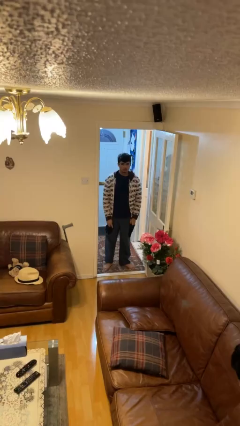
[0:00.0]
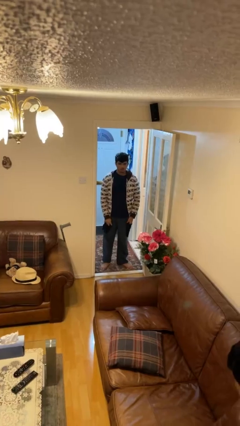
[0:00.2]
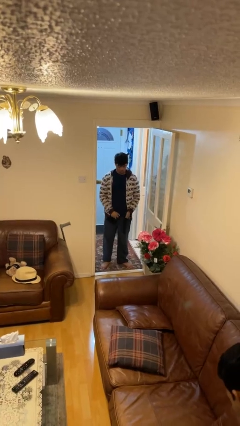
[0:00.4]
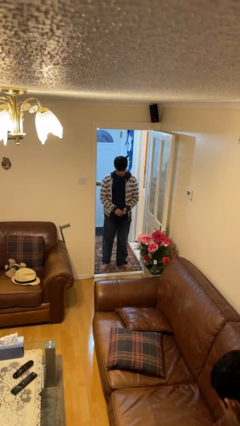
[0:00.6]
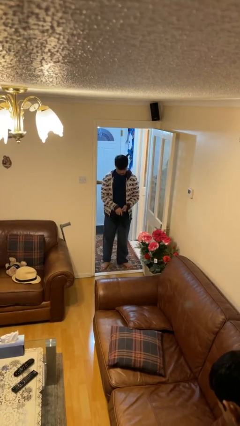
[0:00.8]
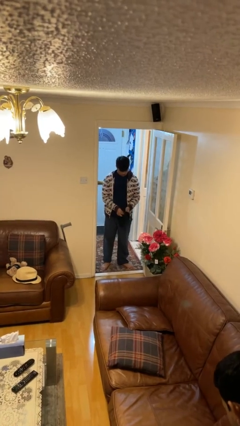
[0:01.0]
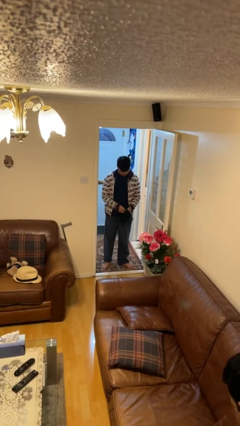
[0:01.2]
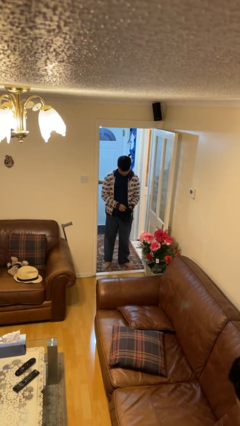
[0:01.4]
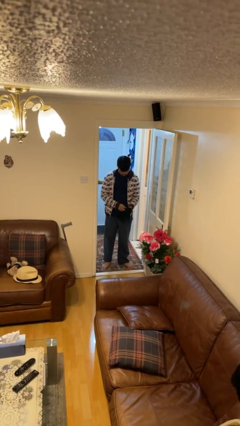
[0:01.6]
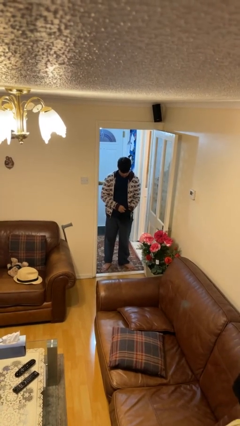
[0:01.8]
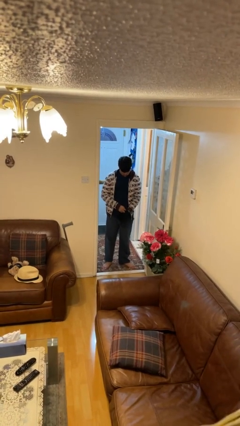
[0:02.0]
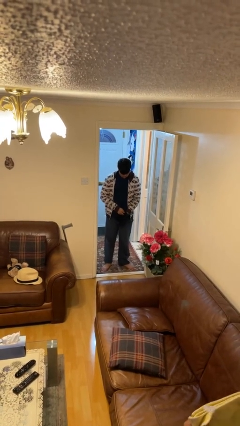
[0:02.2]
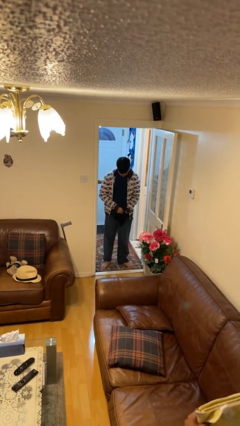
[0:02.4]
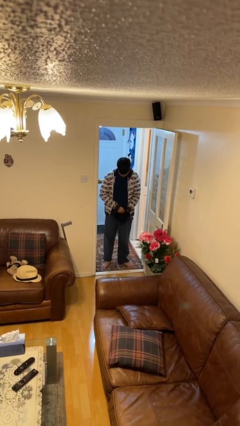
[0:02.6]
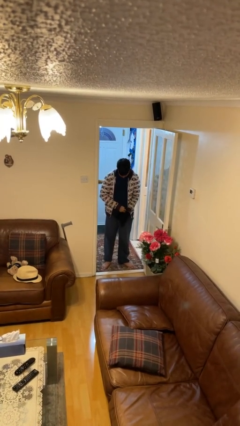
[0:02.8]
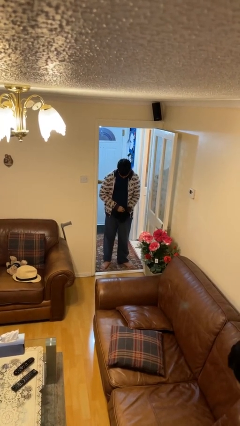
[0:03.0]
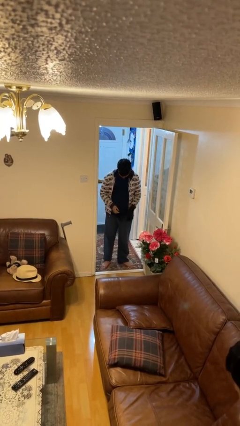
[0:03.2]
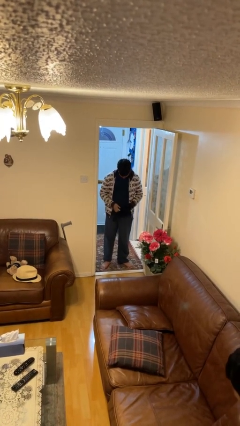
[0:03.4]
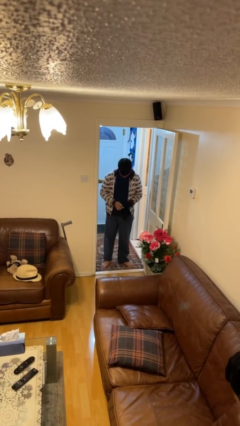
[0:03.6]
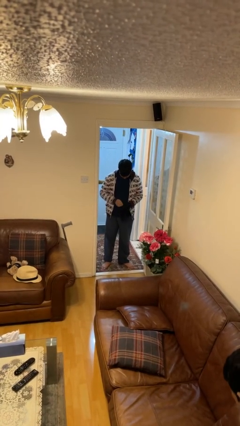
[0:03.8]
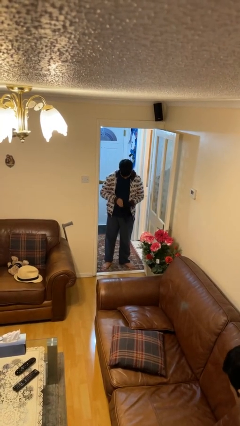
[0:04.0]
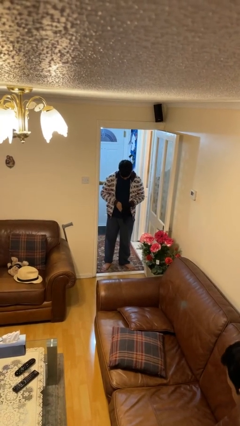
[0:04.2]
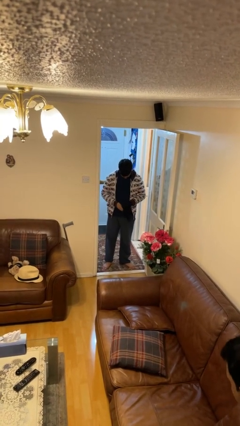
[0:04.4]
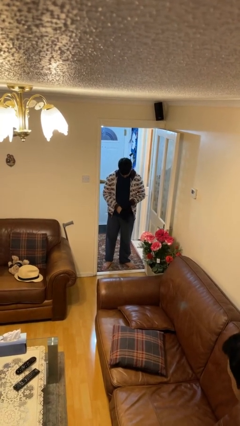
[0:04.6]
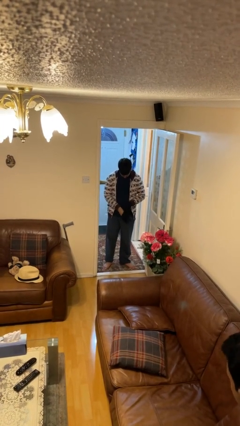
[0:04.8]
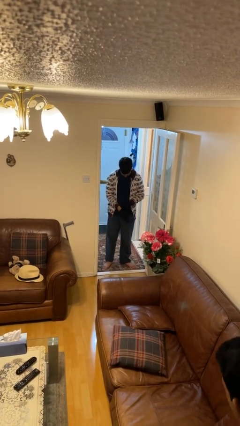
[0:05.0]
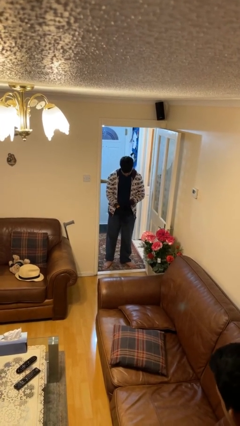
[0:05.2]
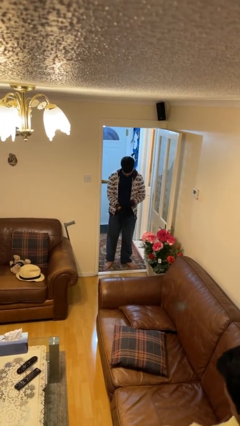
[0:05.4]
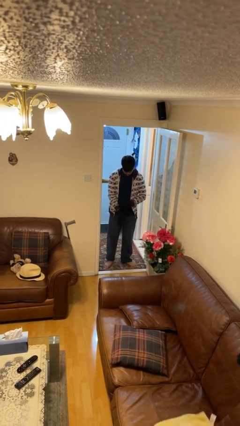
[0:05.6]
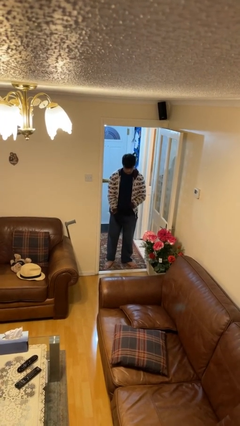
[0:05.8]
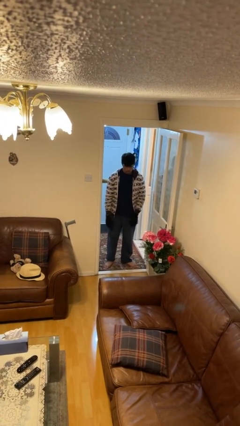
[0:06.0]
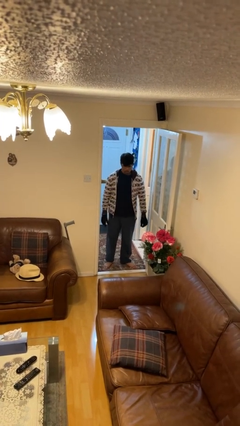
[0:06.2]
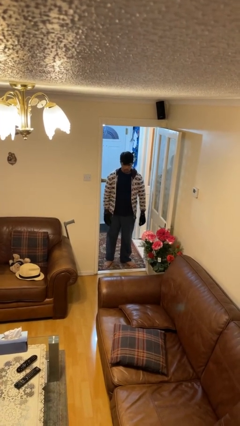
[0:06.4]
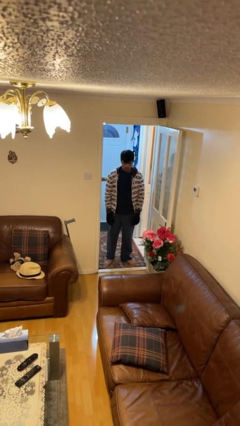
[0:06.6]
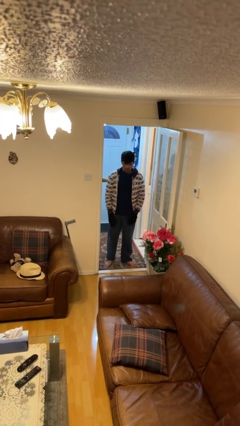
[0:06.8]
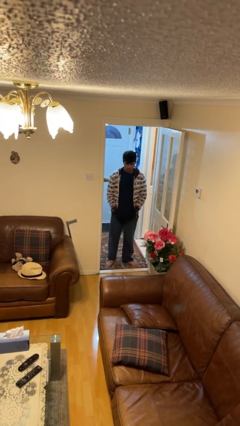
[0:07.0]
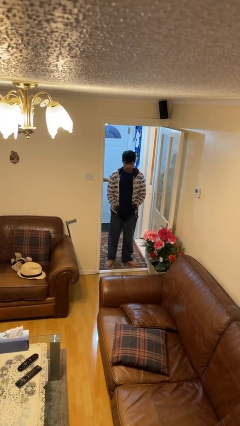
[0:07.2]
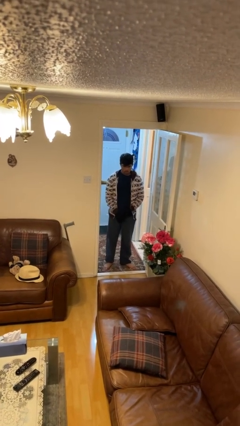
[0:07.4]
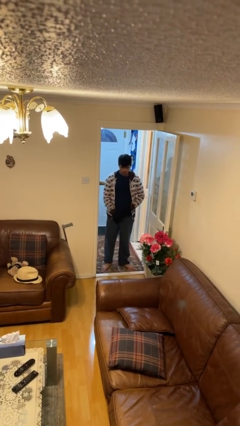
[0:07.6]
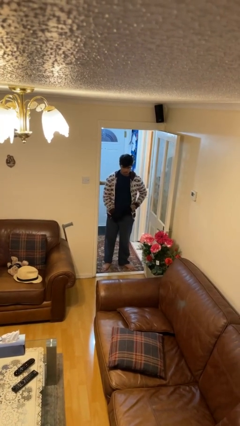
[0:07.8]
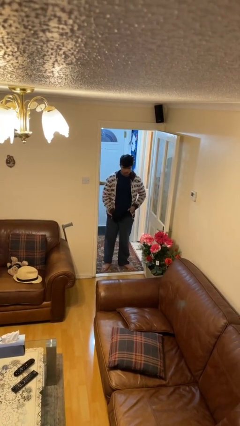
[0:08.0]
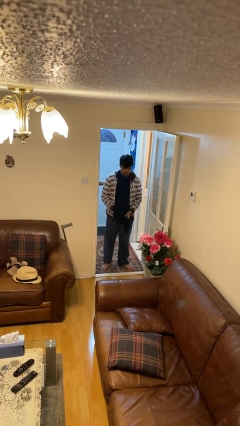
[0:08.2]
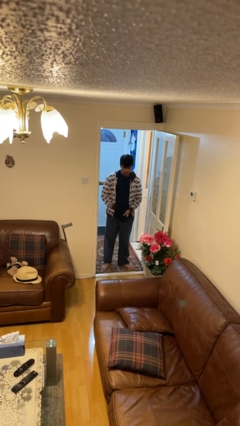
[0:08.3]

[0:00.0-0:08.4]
person puts on gloves

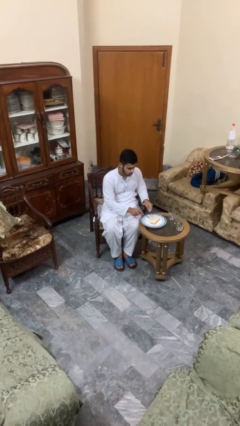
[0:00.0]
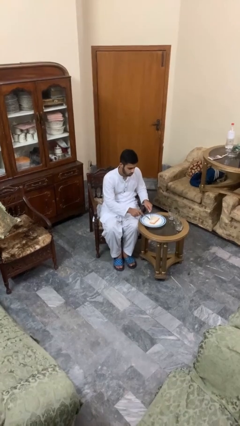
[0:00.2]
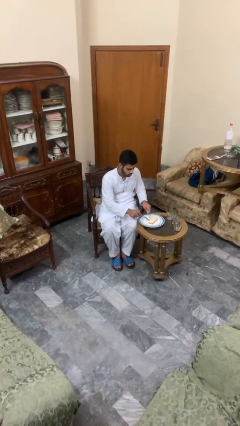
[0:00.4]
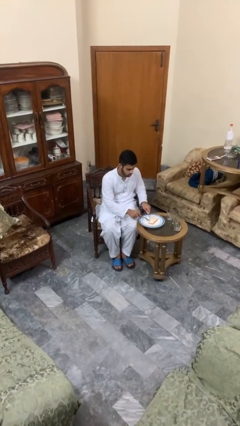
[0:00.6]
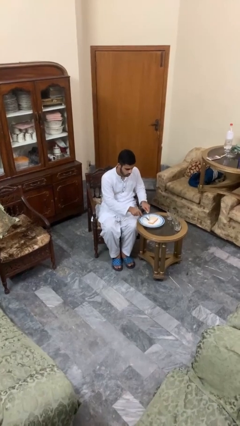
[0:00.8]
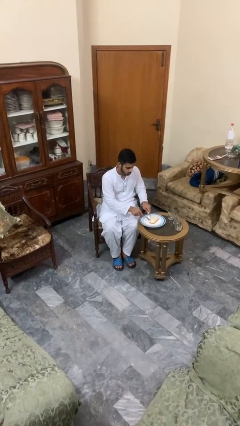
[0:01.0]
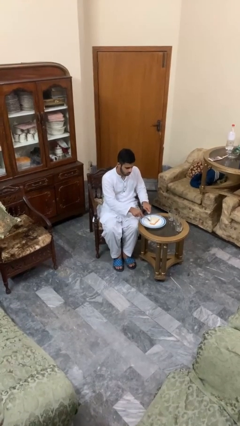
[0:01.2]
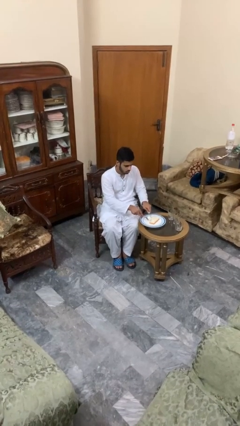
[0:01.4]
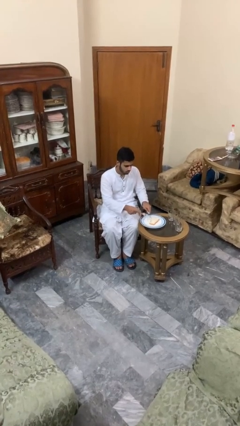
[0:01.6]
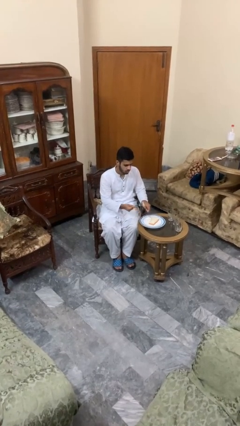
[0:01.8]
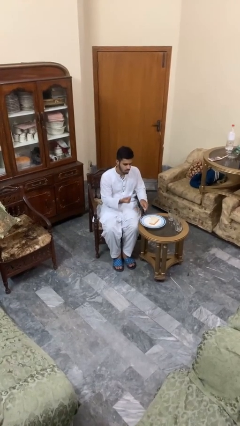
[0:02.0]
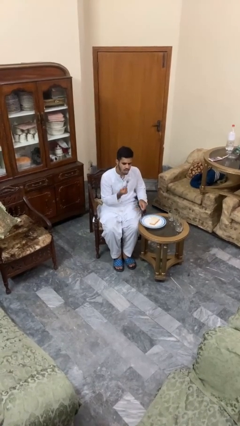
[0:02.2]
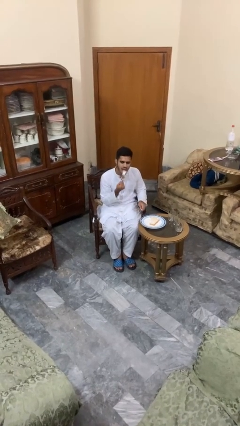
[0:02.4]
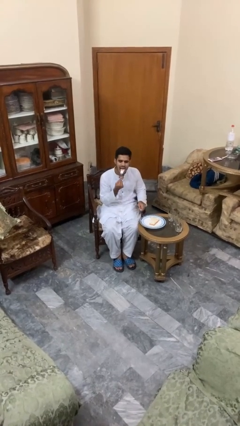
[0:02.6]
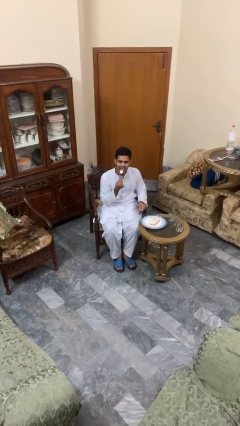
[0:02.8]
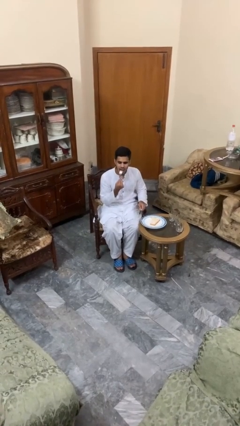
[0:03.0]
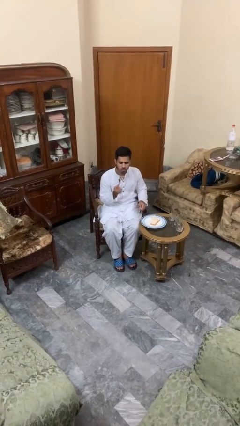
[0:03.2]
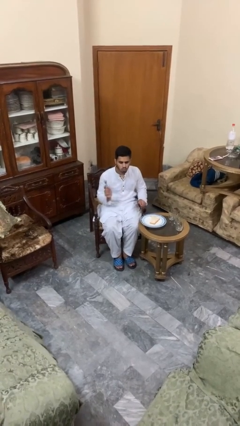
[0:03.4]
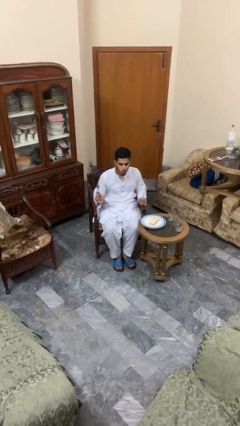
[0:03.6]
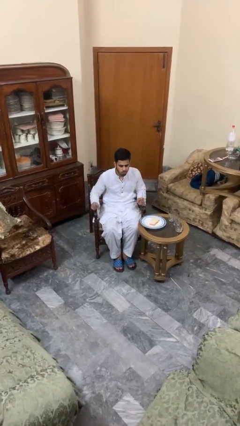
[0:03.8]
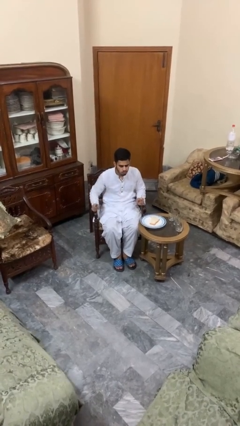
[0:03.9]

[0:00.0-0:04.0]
person eats with utensil

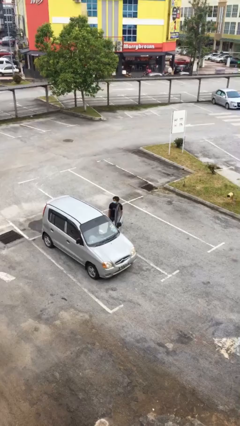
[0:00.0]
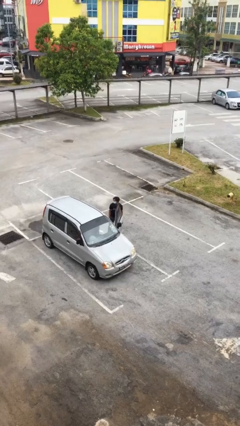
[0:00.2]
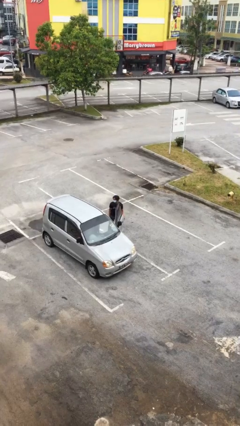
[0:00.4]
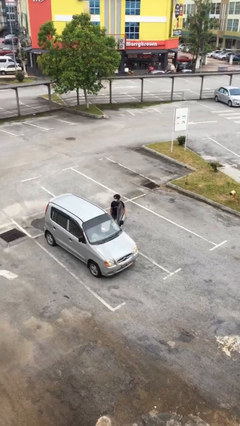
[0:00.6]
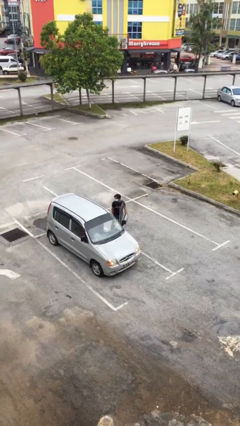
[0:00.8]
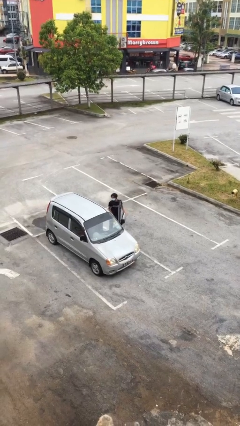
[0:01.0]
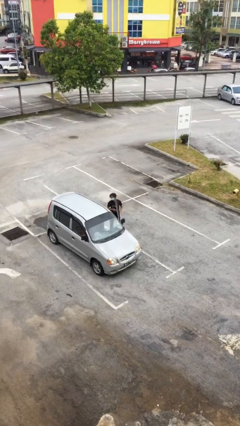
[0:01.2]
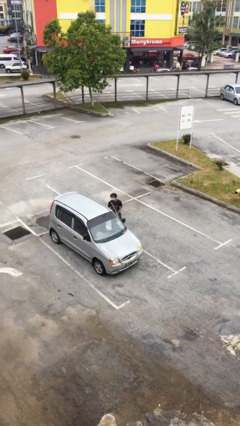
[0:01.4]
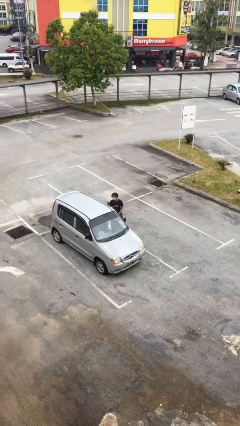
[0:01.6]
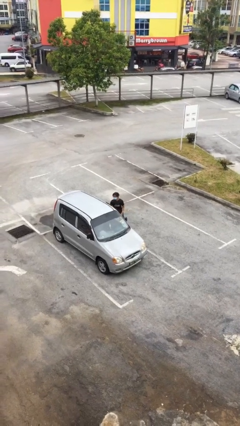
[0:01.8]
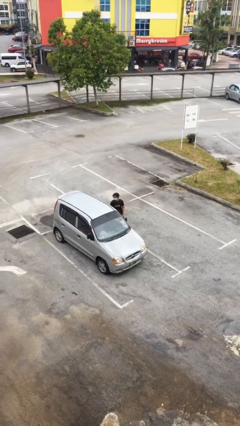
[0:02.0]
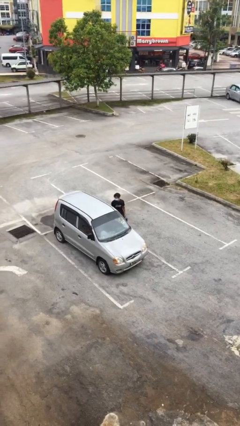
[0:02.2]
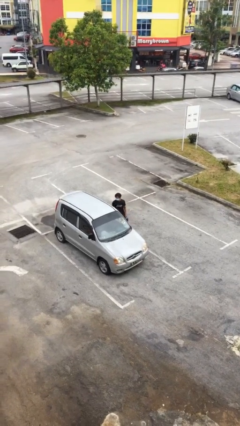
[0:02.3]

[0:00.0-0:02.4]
person closes car door

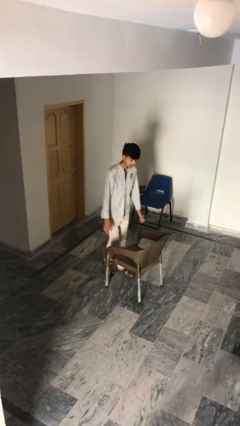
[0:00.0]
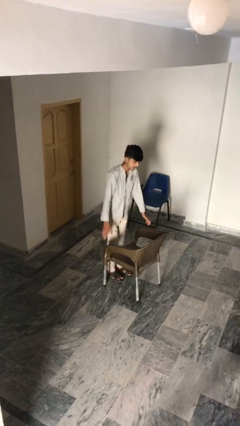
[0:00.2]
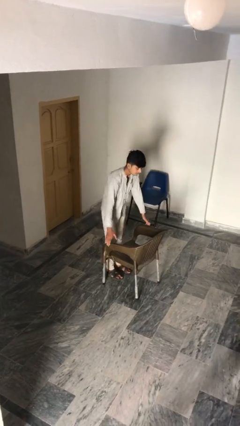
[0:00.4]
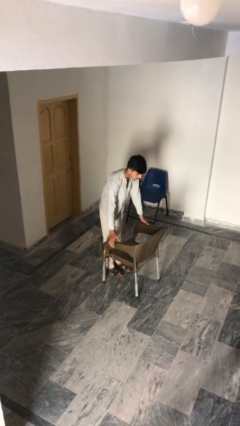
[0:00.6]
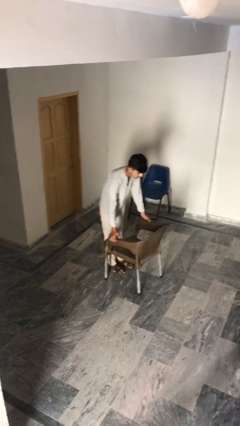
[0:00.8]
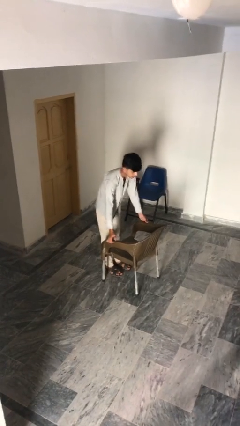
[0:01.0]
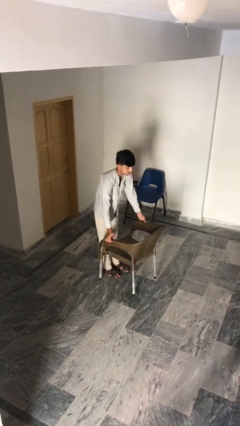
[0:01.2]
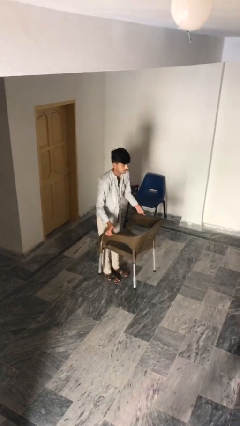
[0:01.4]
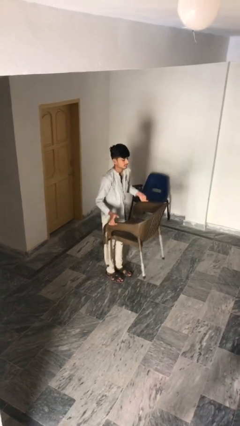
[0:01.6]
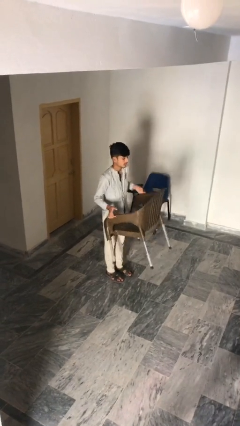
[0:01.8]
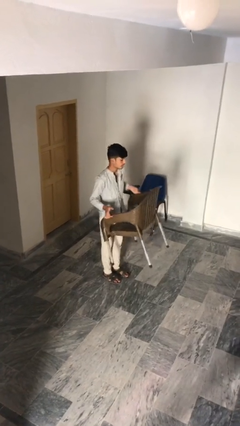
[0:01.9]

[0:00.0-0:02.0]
person picks up object from floor

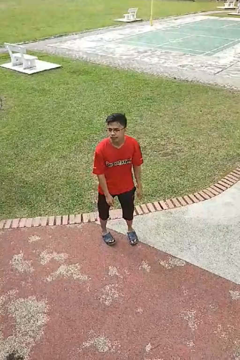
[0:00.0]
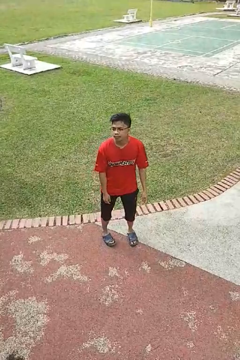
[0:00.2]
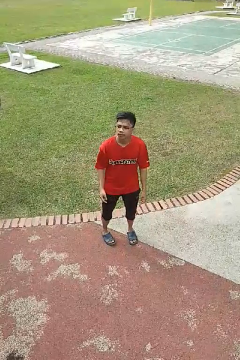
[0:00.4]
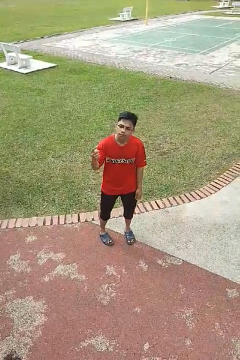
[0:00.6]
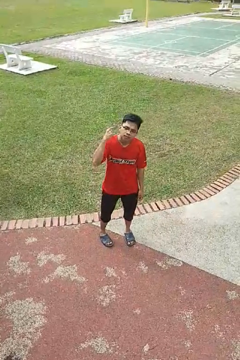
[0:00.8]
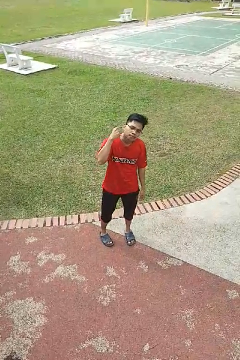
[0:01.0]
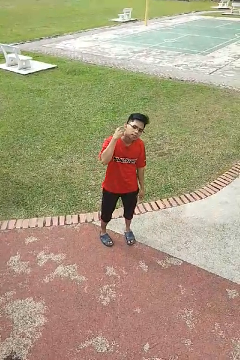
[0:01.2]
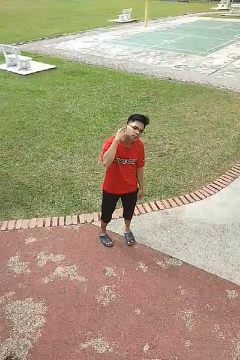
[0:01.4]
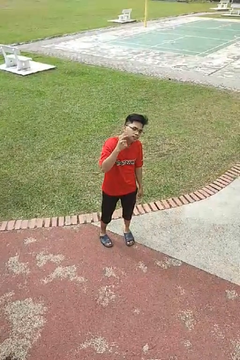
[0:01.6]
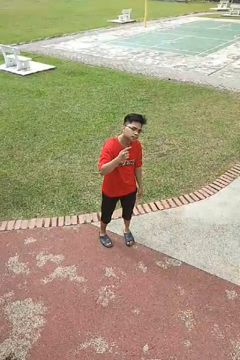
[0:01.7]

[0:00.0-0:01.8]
person gestures listen closely
